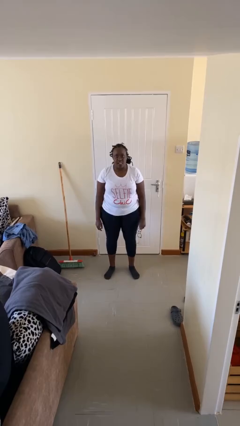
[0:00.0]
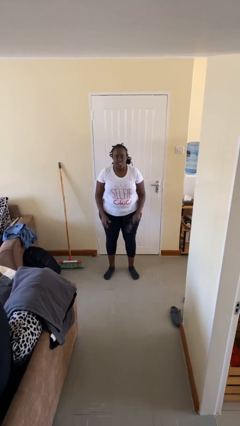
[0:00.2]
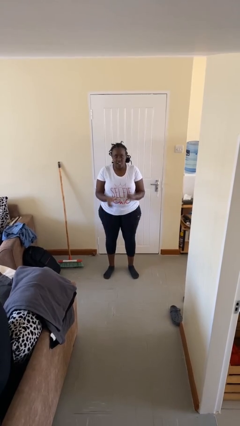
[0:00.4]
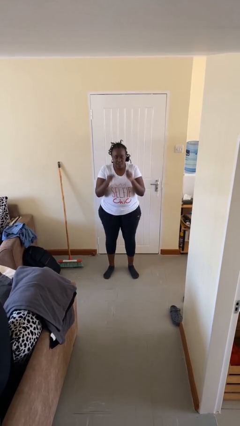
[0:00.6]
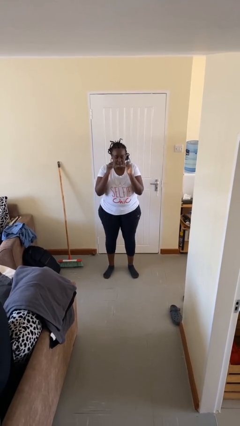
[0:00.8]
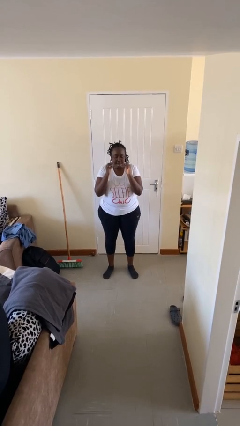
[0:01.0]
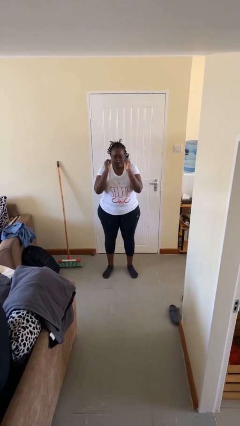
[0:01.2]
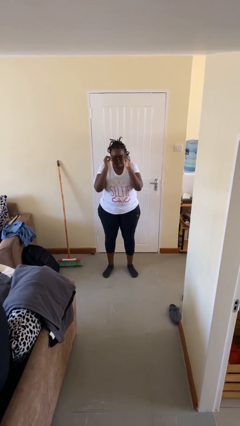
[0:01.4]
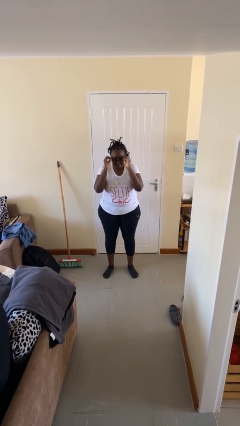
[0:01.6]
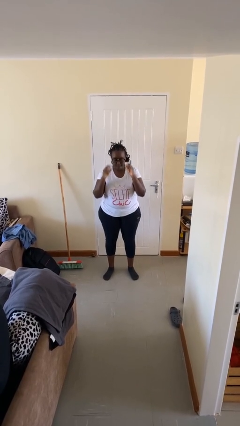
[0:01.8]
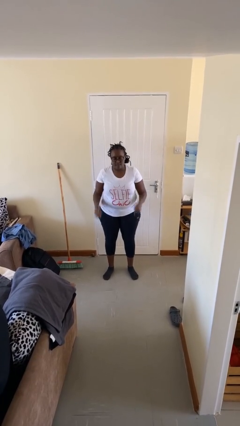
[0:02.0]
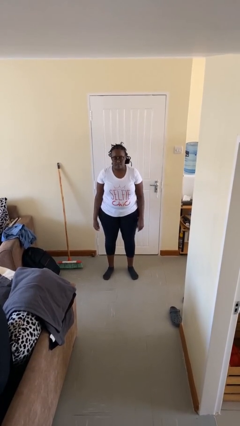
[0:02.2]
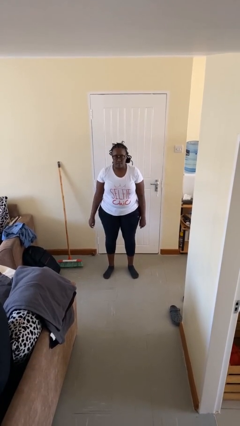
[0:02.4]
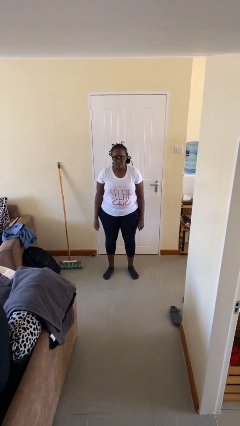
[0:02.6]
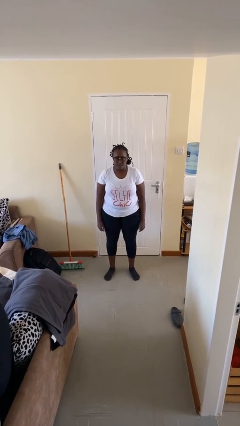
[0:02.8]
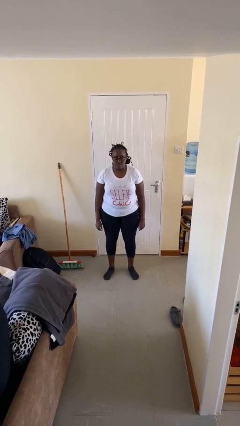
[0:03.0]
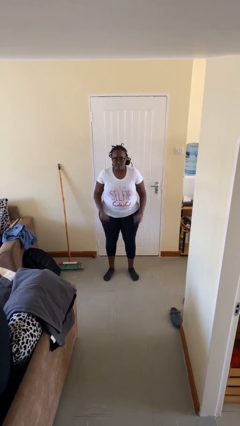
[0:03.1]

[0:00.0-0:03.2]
person puts on glasses

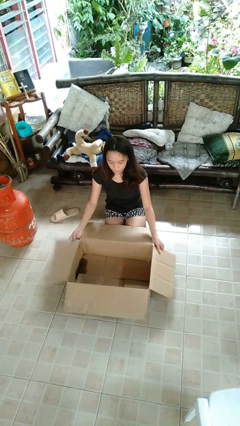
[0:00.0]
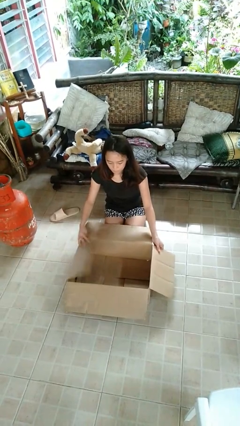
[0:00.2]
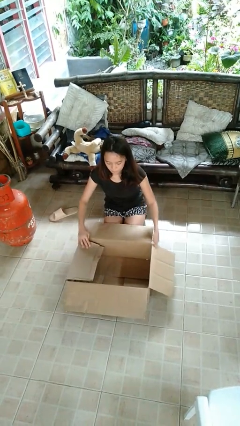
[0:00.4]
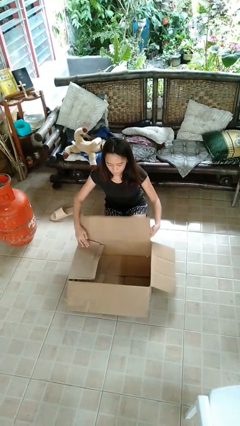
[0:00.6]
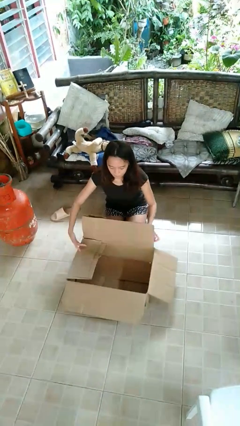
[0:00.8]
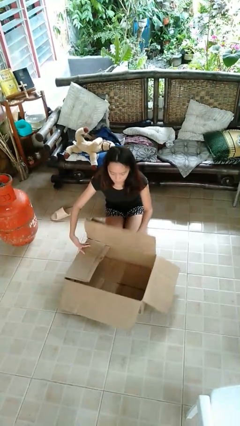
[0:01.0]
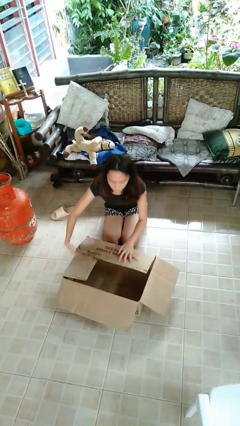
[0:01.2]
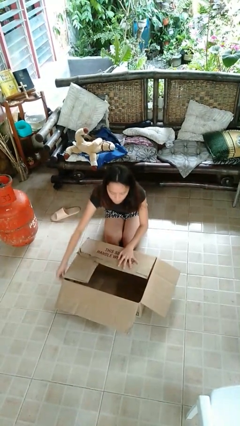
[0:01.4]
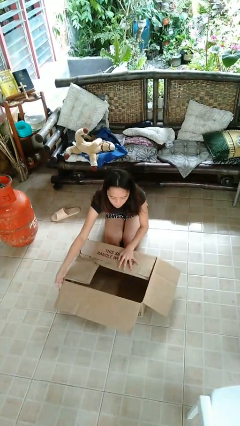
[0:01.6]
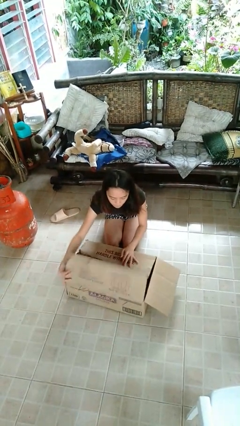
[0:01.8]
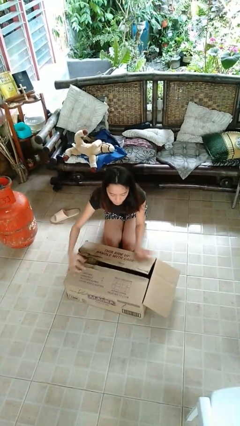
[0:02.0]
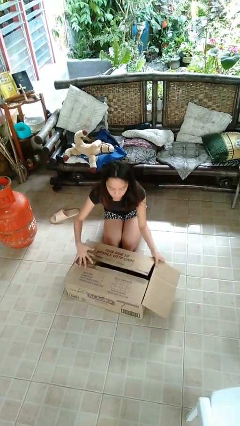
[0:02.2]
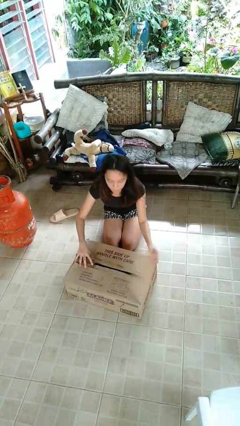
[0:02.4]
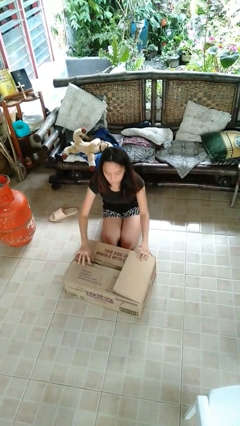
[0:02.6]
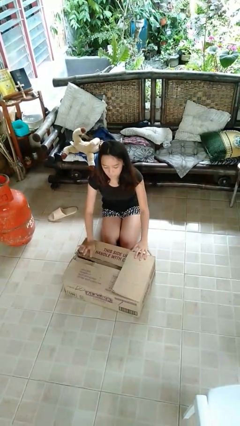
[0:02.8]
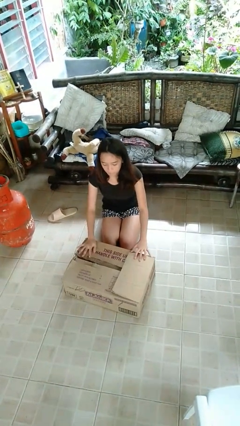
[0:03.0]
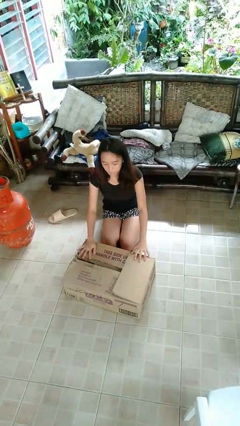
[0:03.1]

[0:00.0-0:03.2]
person closes box

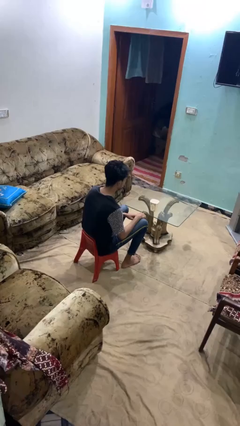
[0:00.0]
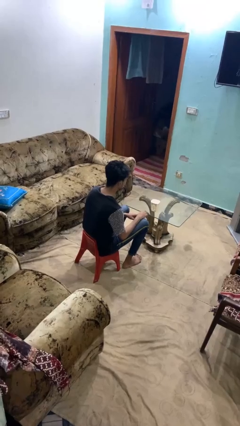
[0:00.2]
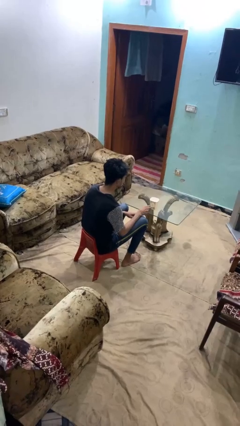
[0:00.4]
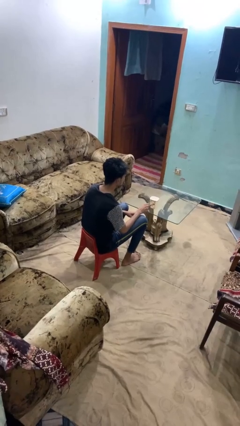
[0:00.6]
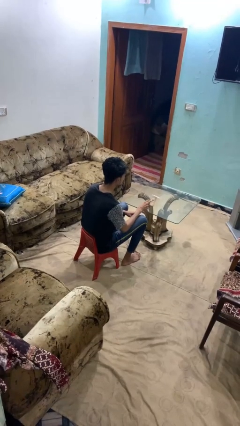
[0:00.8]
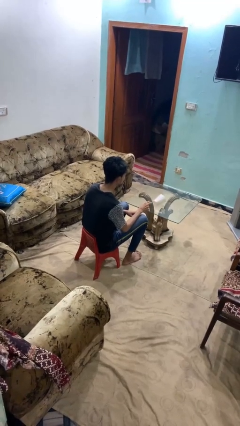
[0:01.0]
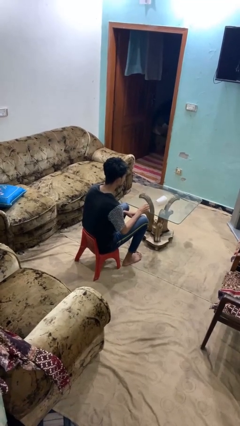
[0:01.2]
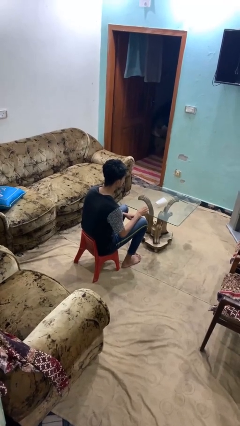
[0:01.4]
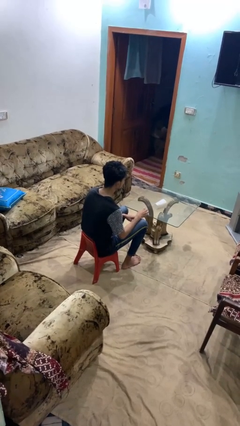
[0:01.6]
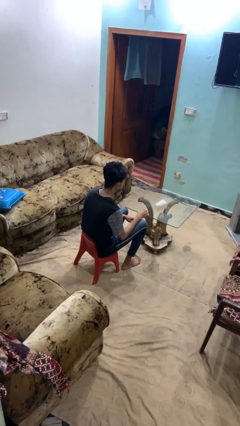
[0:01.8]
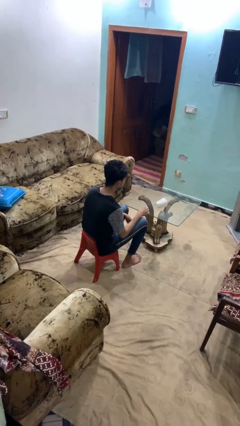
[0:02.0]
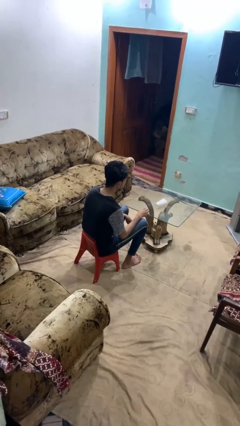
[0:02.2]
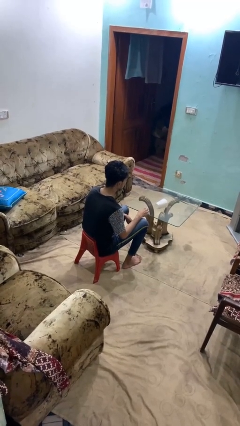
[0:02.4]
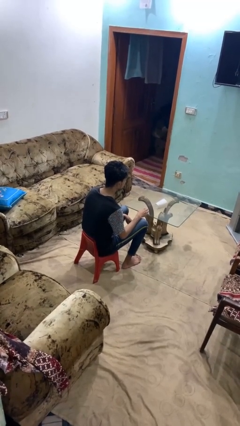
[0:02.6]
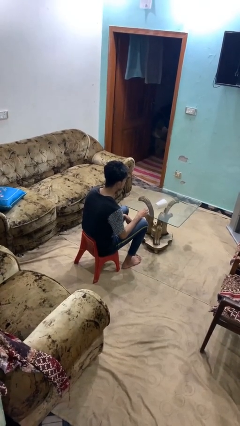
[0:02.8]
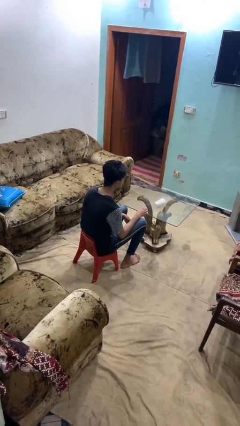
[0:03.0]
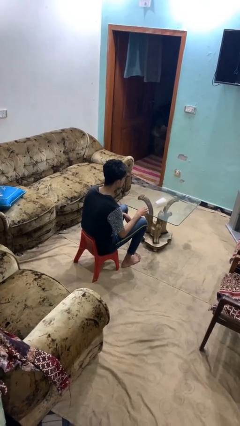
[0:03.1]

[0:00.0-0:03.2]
person knocks over glass

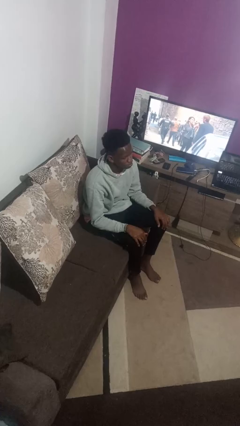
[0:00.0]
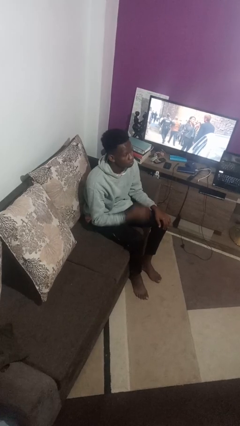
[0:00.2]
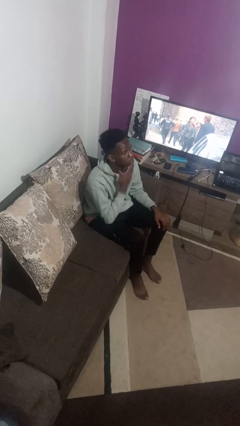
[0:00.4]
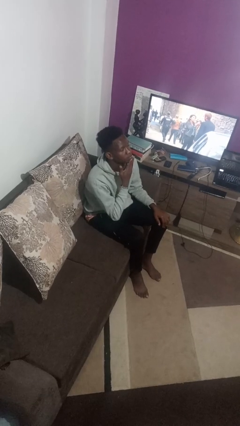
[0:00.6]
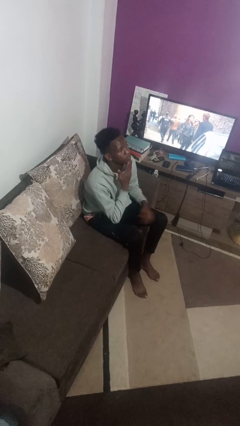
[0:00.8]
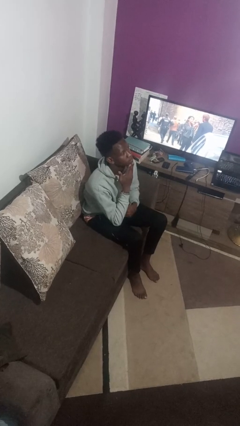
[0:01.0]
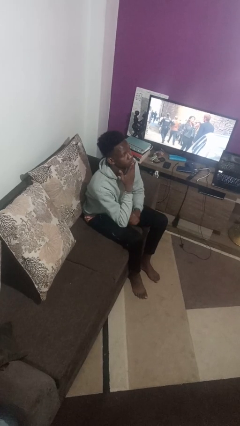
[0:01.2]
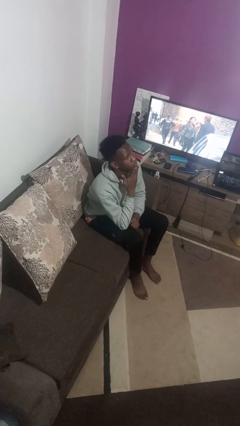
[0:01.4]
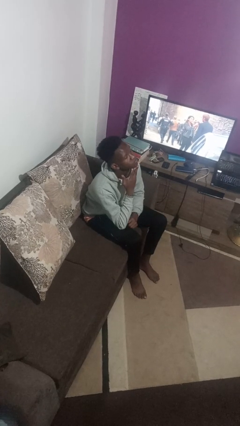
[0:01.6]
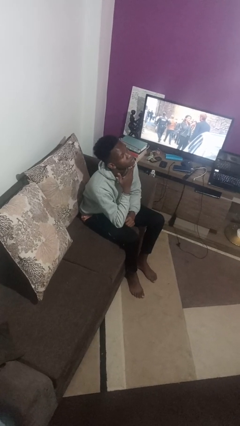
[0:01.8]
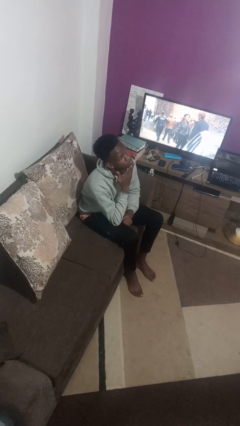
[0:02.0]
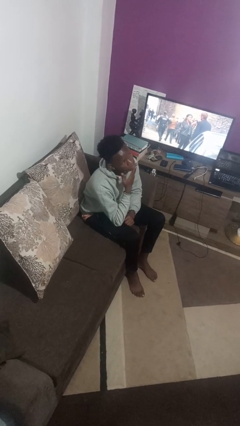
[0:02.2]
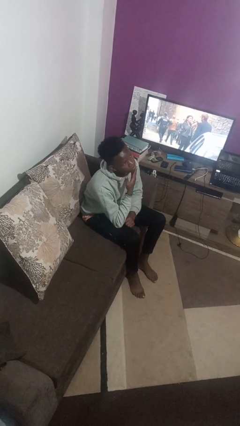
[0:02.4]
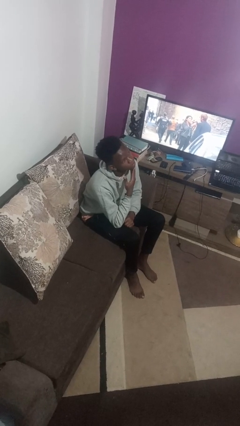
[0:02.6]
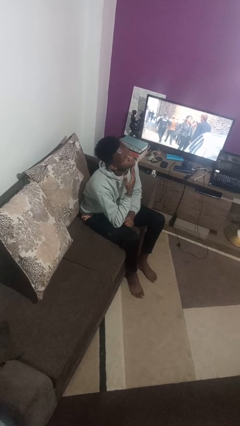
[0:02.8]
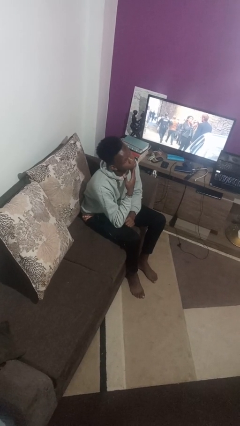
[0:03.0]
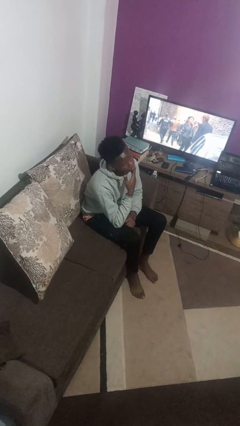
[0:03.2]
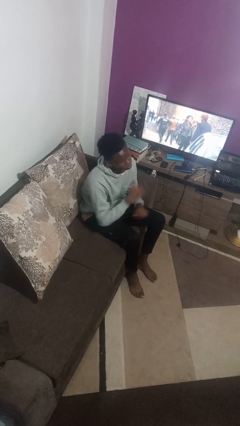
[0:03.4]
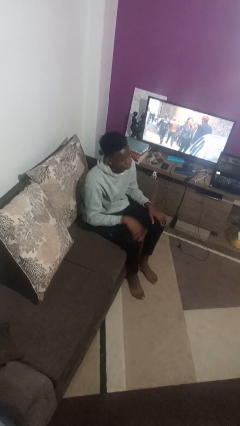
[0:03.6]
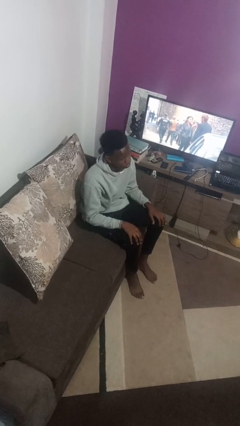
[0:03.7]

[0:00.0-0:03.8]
person strokes chin

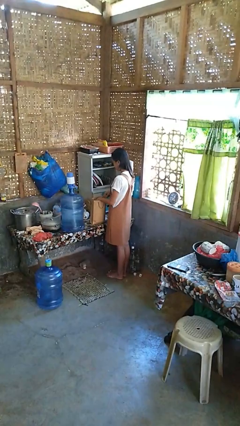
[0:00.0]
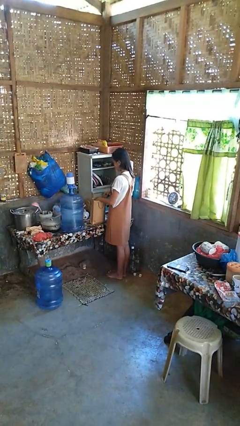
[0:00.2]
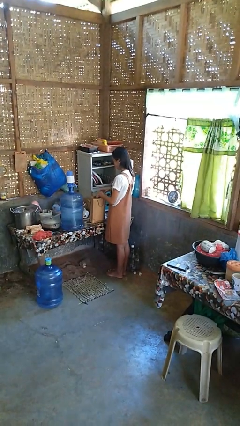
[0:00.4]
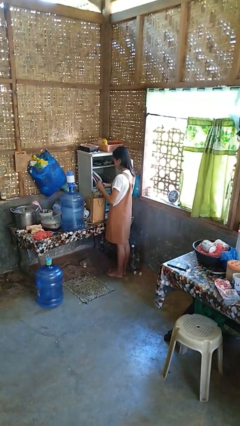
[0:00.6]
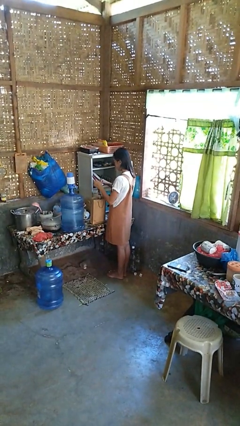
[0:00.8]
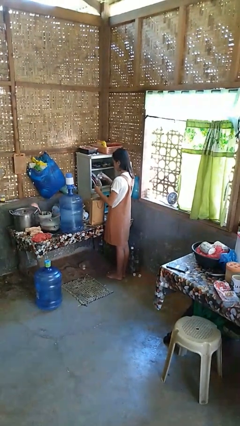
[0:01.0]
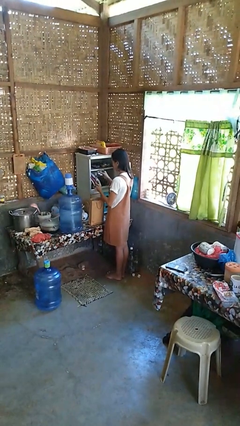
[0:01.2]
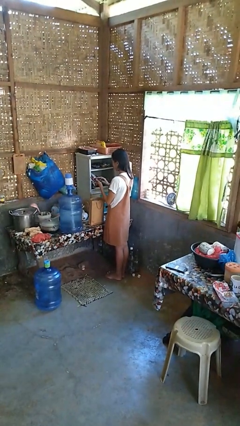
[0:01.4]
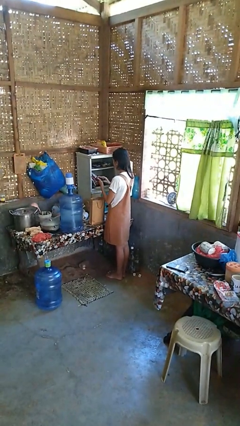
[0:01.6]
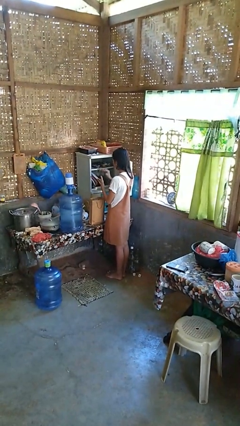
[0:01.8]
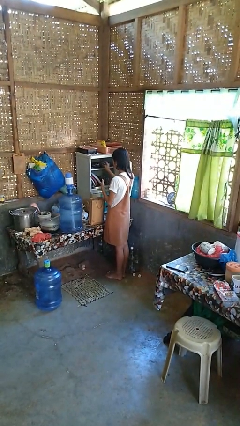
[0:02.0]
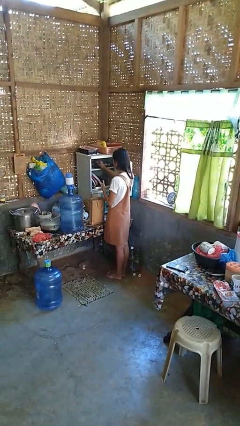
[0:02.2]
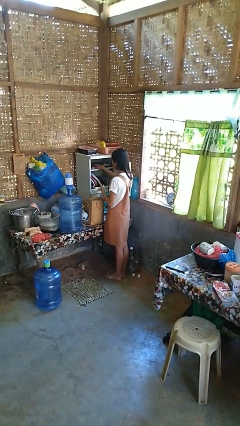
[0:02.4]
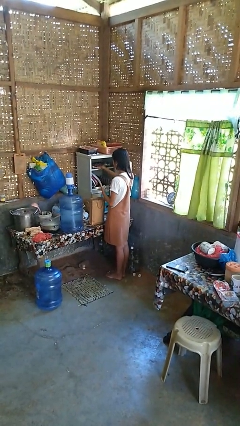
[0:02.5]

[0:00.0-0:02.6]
person loads groceries into cabinet

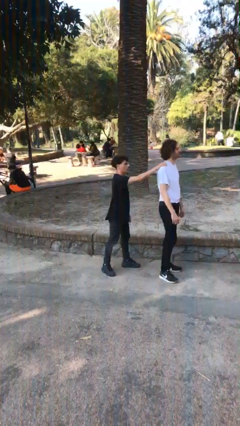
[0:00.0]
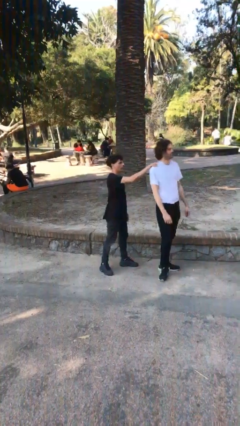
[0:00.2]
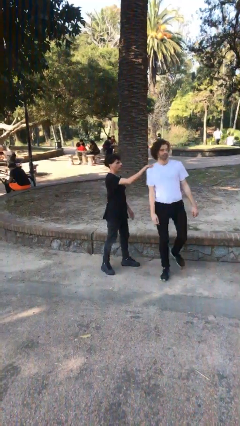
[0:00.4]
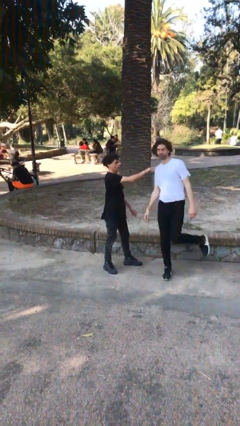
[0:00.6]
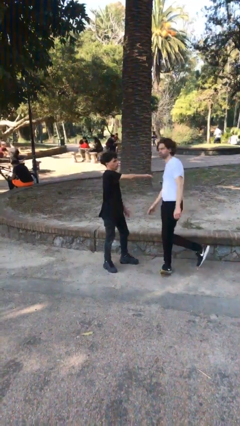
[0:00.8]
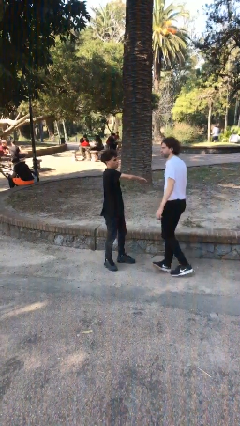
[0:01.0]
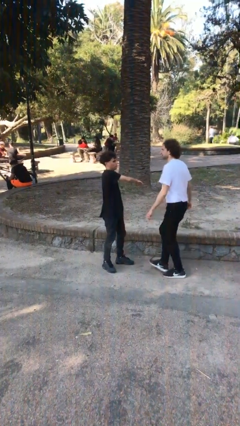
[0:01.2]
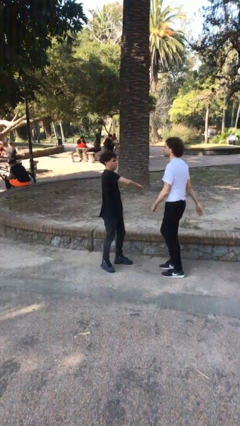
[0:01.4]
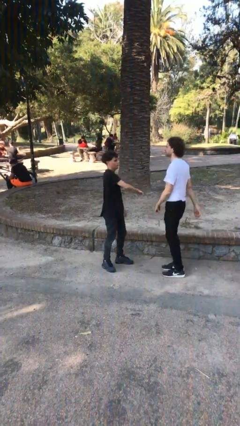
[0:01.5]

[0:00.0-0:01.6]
person spins person around
